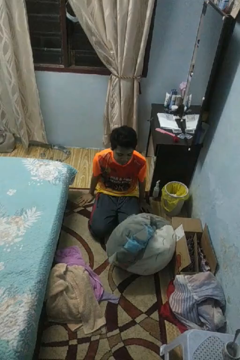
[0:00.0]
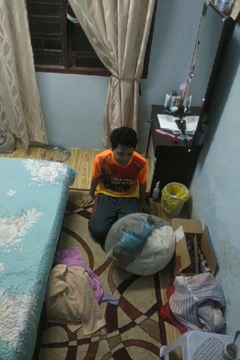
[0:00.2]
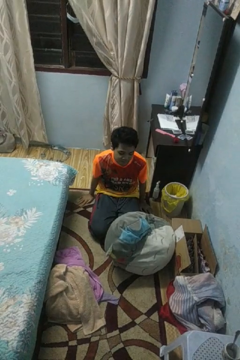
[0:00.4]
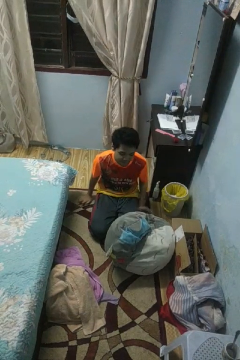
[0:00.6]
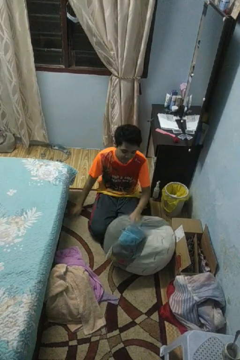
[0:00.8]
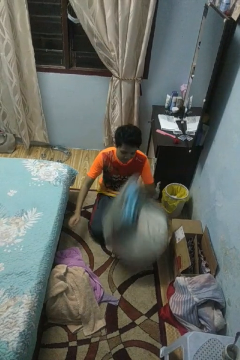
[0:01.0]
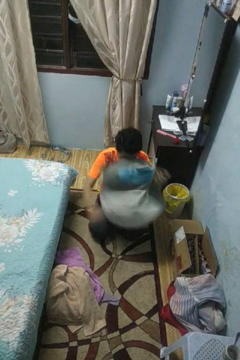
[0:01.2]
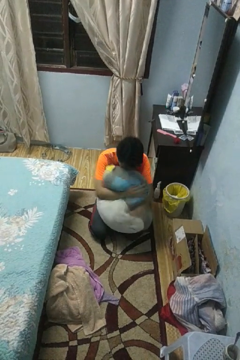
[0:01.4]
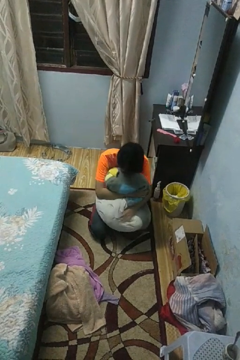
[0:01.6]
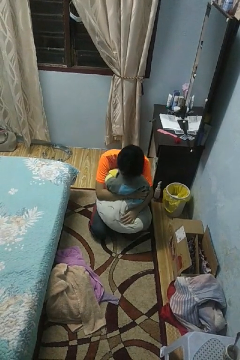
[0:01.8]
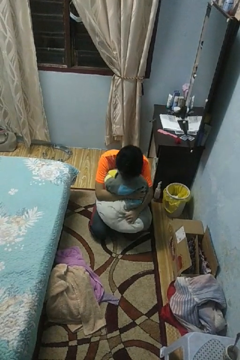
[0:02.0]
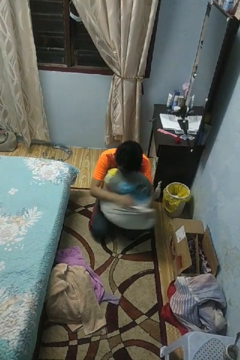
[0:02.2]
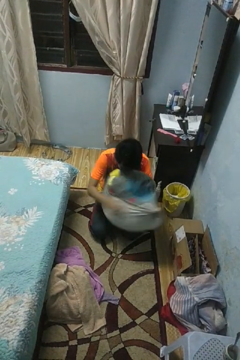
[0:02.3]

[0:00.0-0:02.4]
person hugs stuffed animal

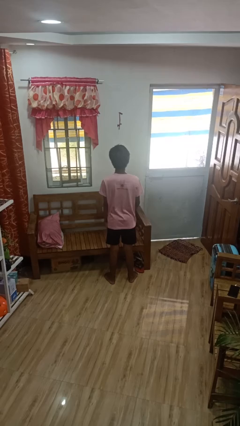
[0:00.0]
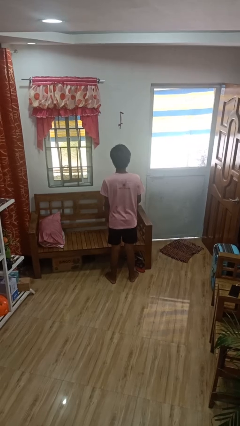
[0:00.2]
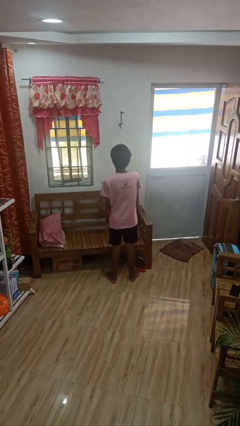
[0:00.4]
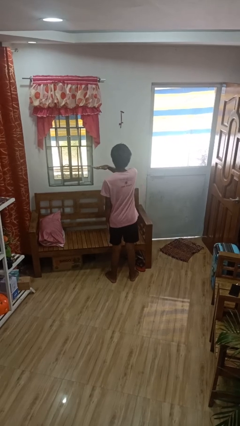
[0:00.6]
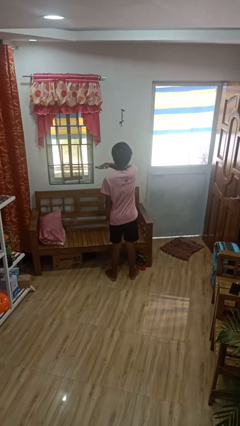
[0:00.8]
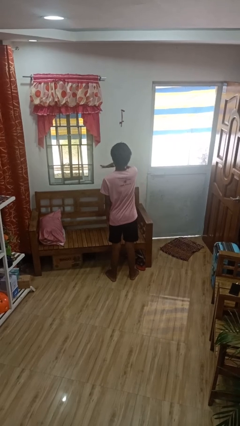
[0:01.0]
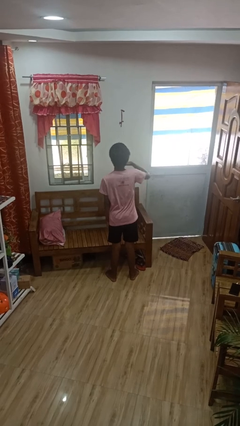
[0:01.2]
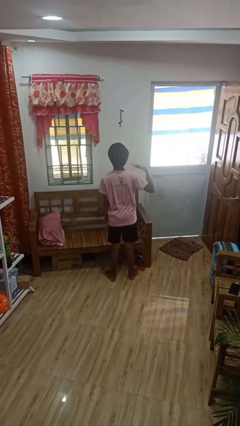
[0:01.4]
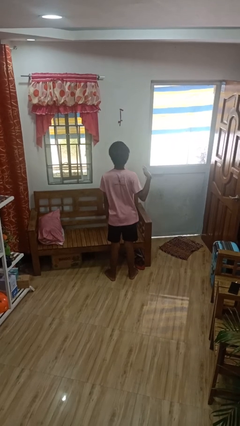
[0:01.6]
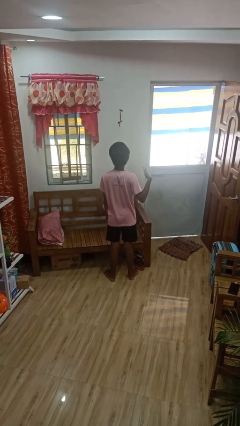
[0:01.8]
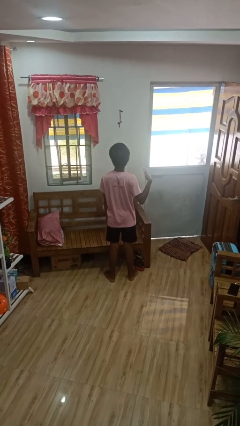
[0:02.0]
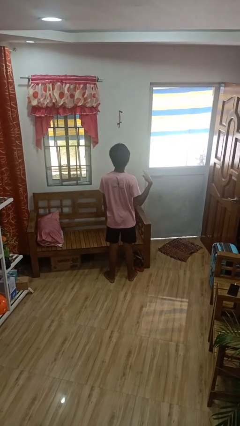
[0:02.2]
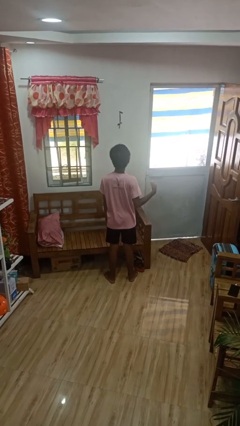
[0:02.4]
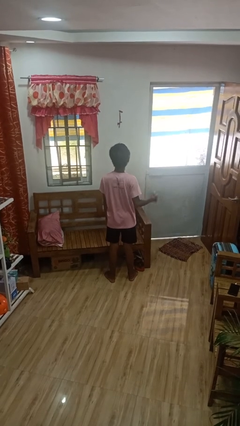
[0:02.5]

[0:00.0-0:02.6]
person gestures cut

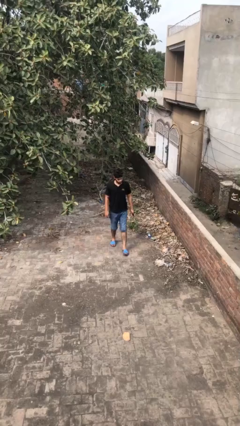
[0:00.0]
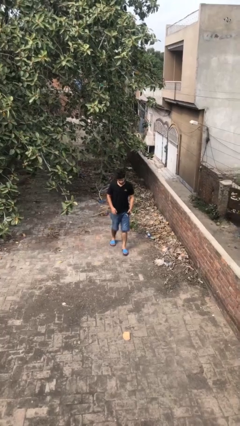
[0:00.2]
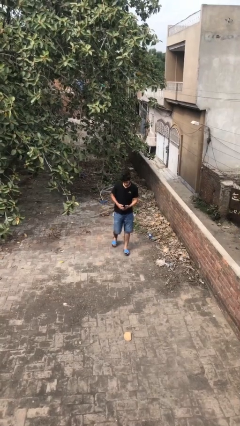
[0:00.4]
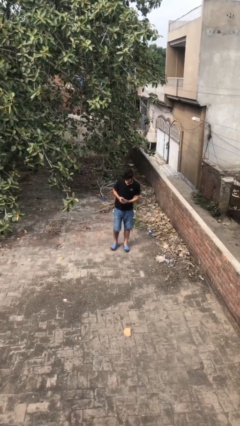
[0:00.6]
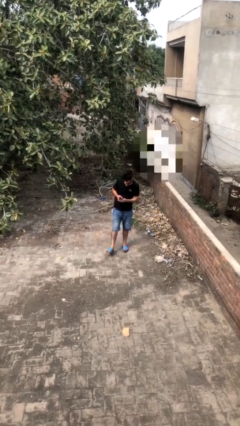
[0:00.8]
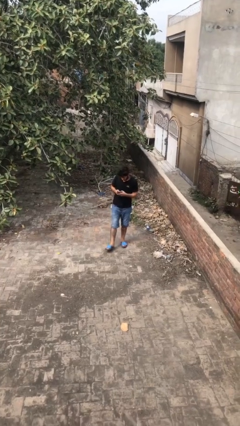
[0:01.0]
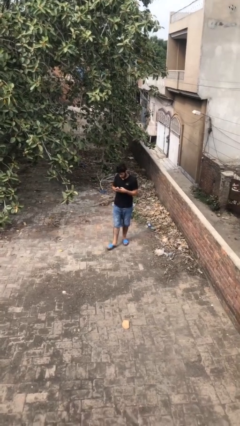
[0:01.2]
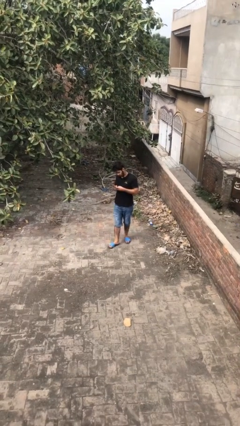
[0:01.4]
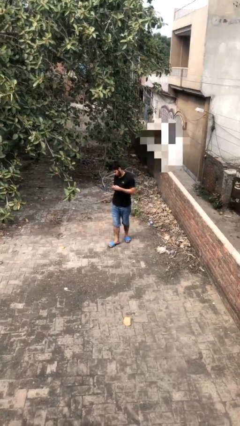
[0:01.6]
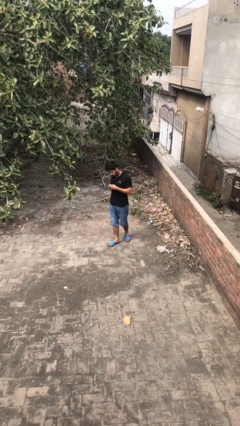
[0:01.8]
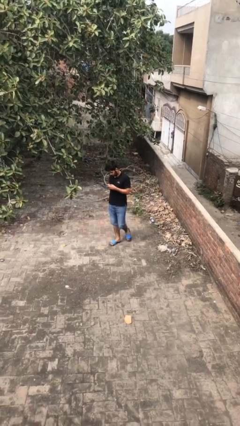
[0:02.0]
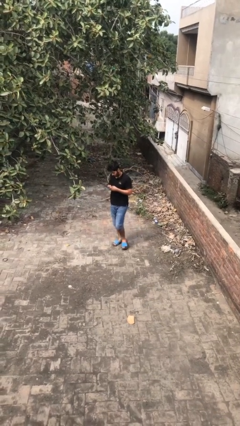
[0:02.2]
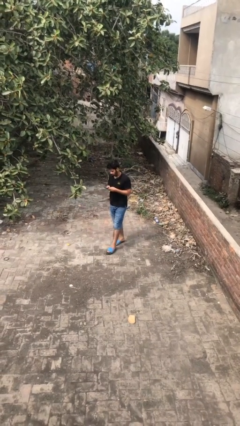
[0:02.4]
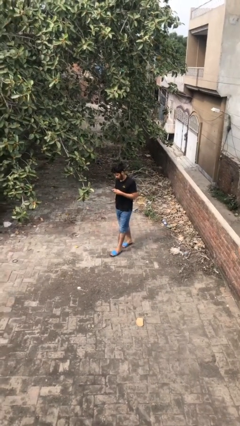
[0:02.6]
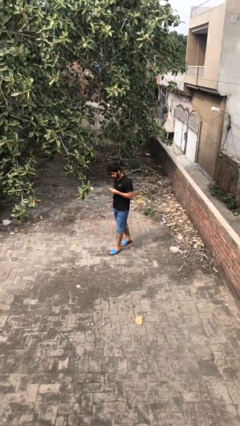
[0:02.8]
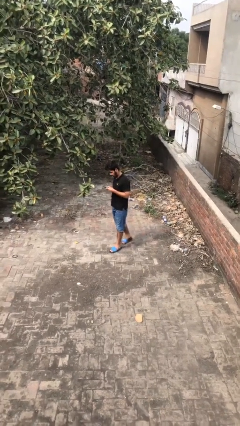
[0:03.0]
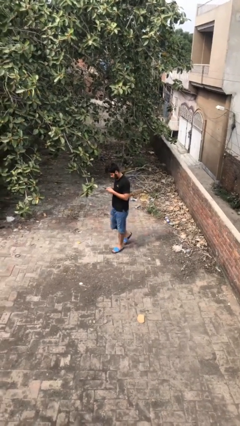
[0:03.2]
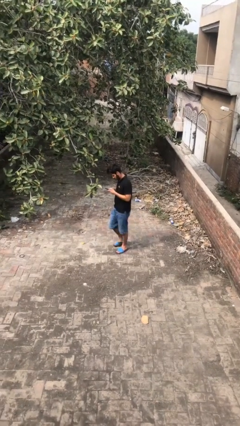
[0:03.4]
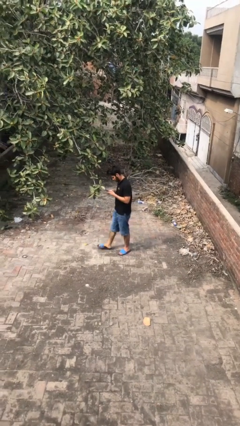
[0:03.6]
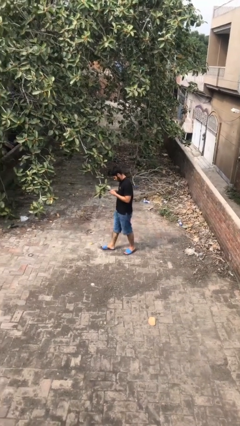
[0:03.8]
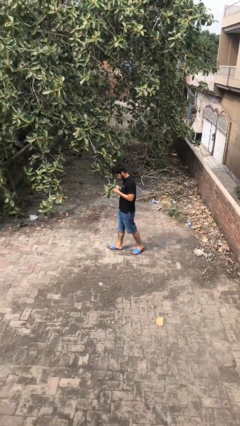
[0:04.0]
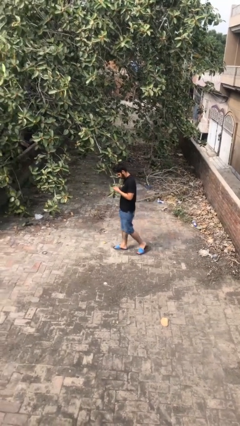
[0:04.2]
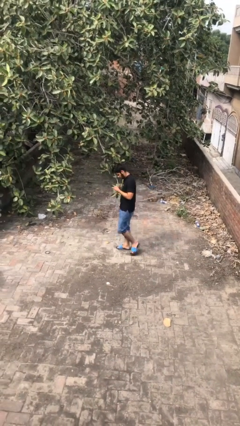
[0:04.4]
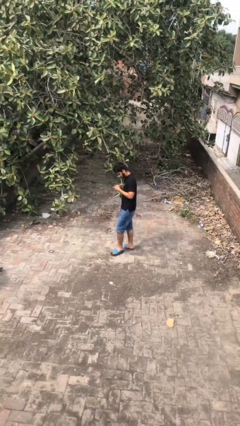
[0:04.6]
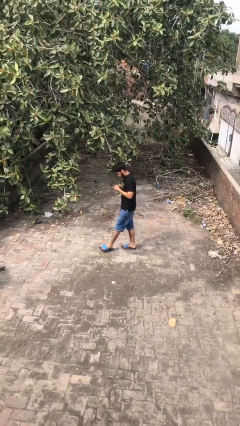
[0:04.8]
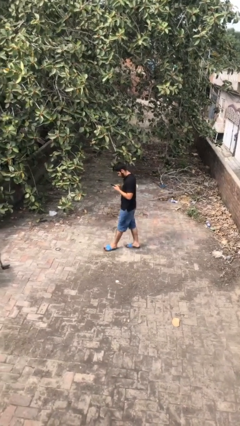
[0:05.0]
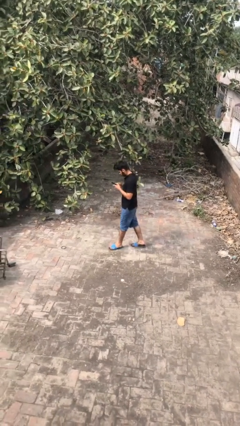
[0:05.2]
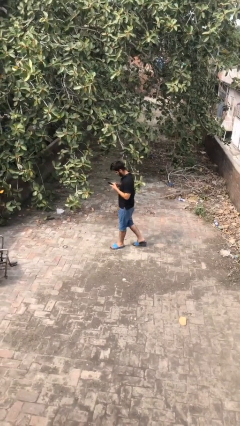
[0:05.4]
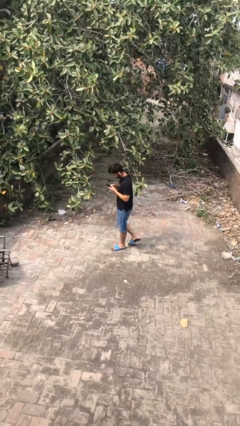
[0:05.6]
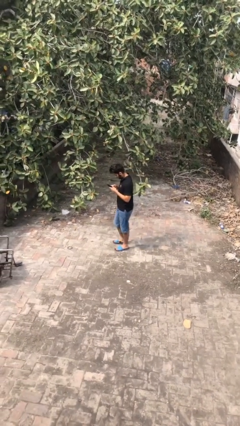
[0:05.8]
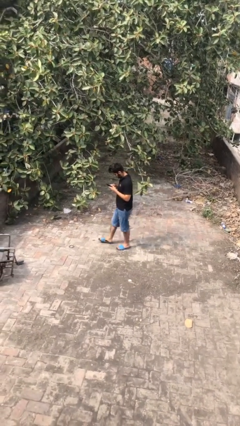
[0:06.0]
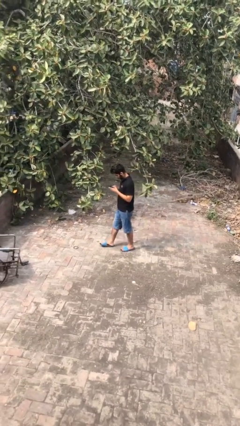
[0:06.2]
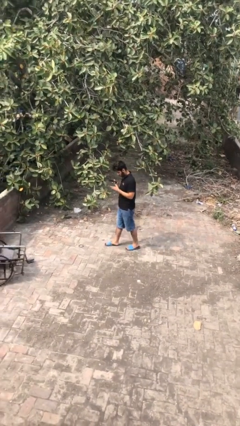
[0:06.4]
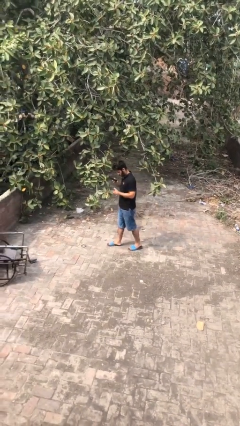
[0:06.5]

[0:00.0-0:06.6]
person texts on phone

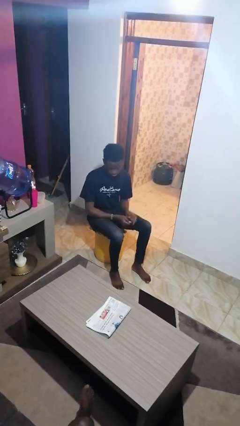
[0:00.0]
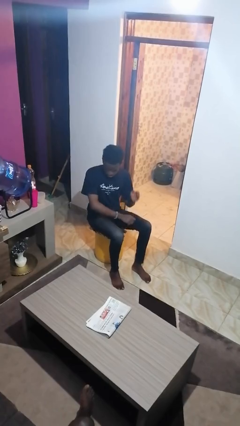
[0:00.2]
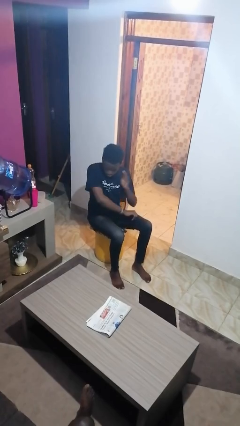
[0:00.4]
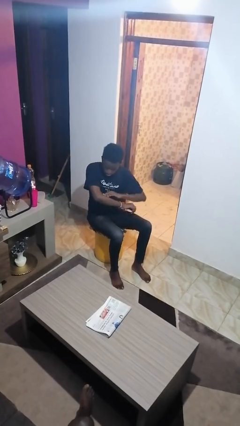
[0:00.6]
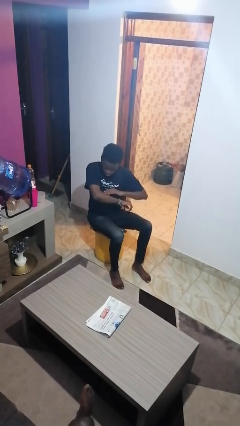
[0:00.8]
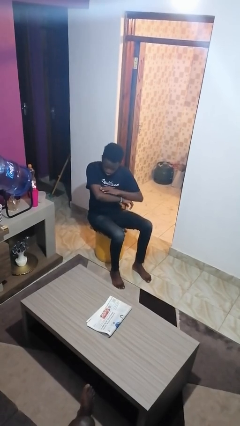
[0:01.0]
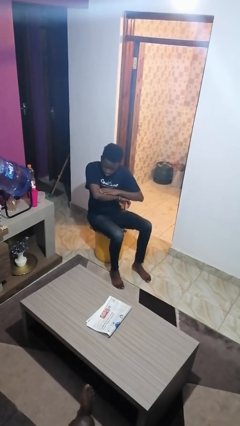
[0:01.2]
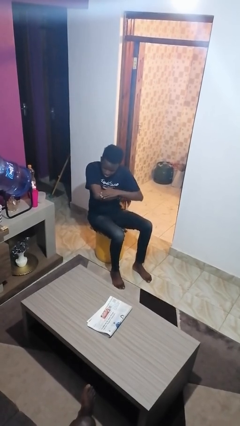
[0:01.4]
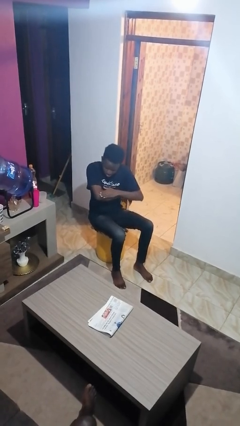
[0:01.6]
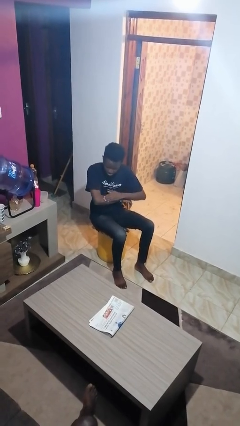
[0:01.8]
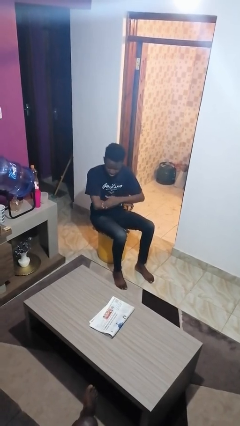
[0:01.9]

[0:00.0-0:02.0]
person swats bug

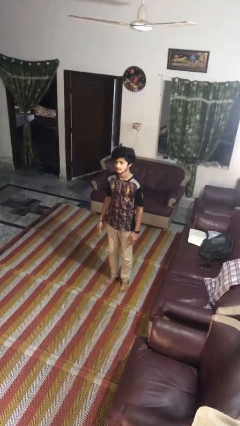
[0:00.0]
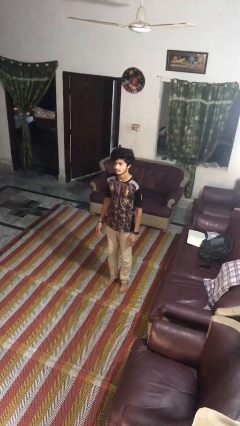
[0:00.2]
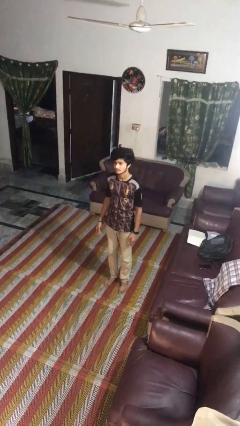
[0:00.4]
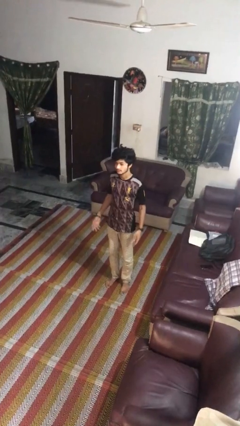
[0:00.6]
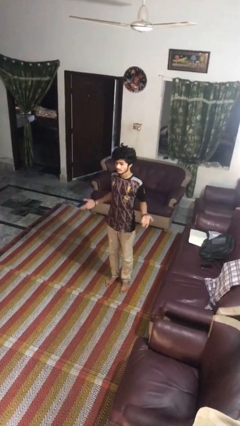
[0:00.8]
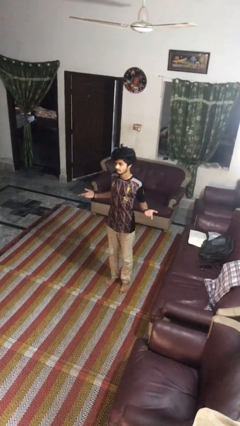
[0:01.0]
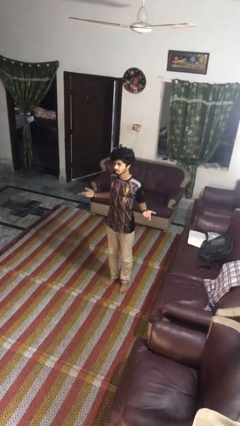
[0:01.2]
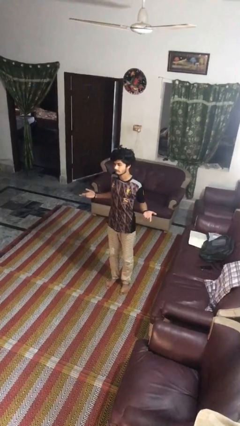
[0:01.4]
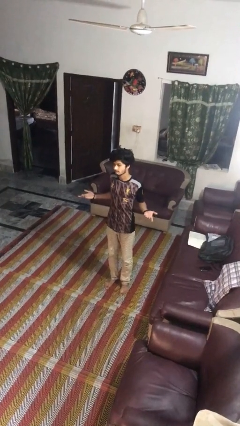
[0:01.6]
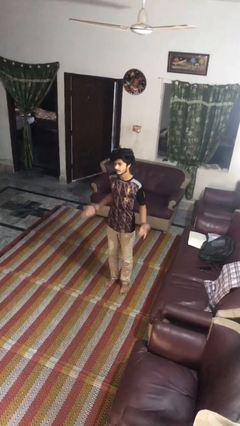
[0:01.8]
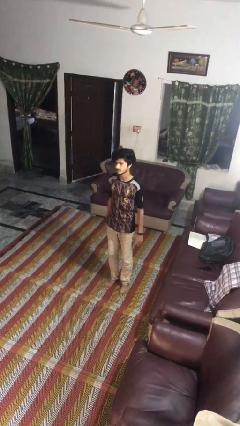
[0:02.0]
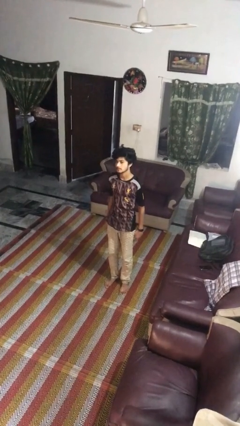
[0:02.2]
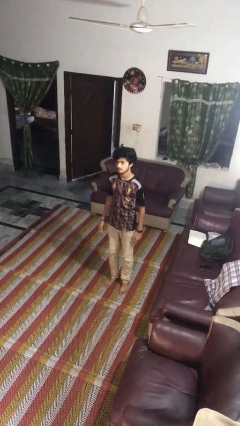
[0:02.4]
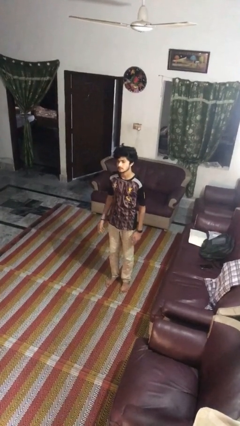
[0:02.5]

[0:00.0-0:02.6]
person shrugs

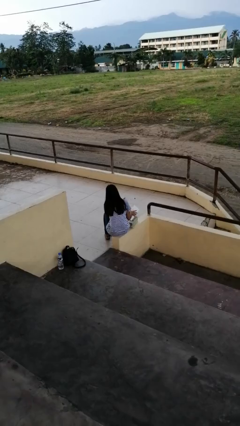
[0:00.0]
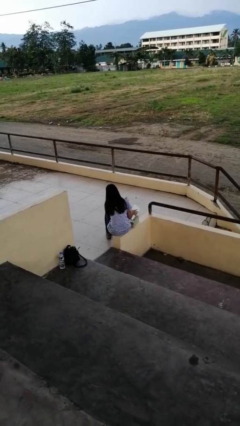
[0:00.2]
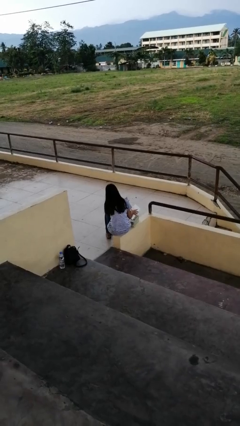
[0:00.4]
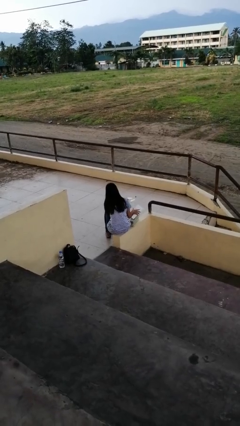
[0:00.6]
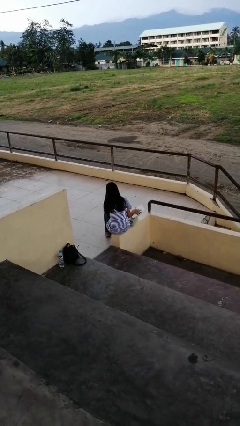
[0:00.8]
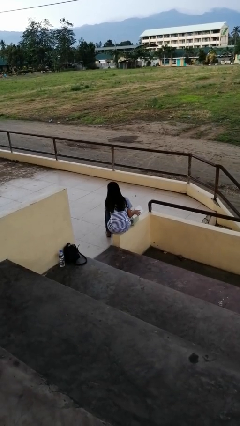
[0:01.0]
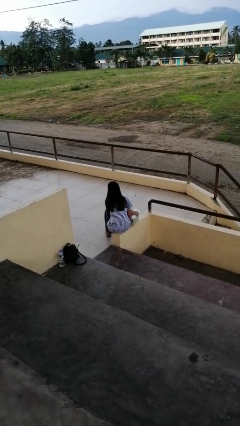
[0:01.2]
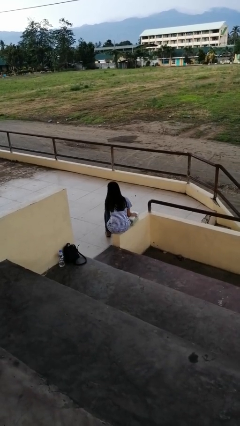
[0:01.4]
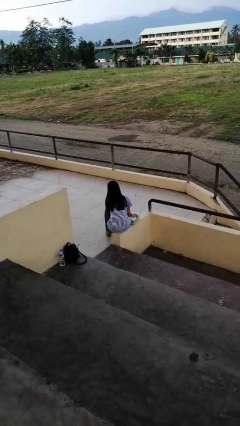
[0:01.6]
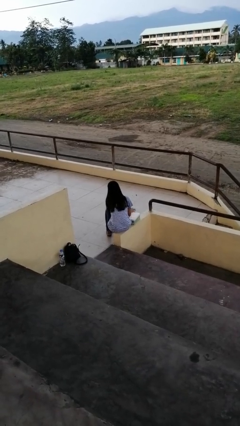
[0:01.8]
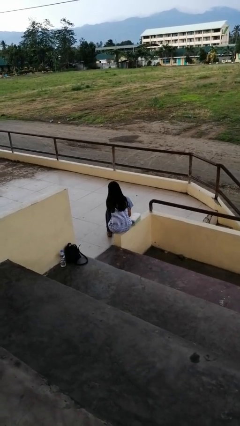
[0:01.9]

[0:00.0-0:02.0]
person puts object into box
